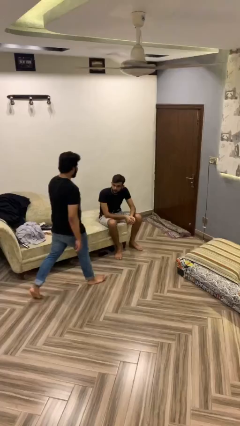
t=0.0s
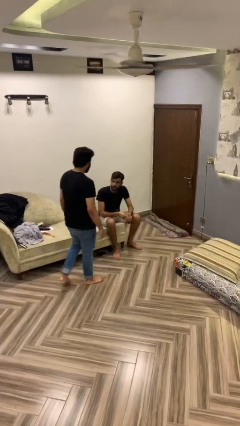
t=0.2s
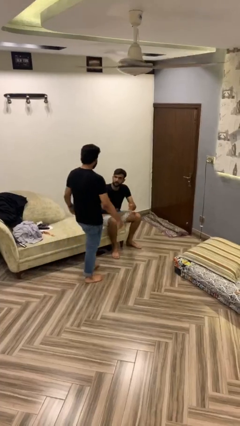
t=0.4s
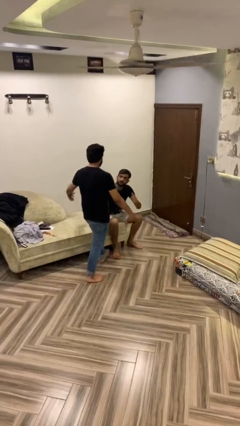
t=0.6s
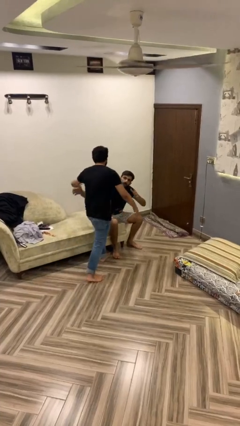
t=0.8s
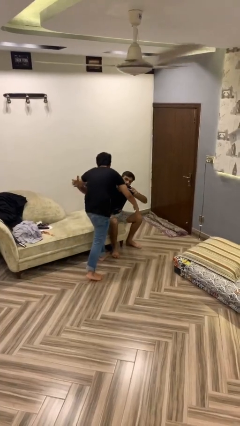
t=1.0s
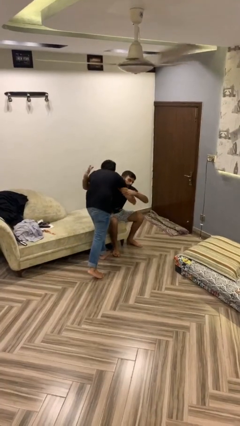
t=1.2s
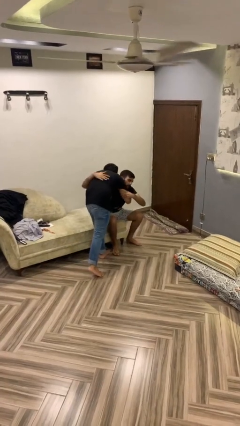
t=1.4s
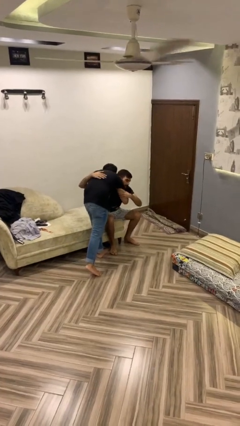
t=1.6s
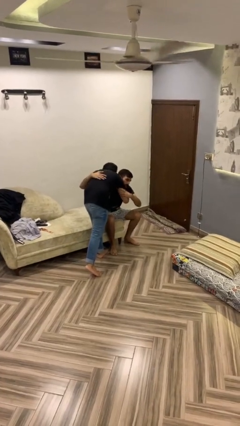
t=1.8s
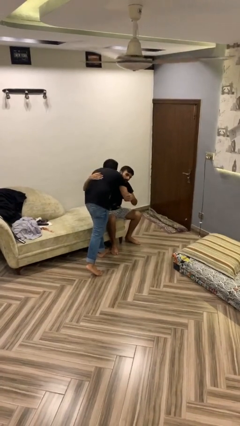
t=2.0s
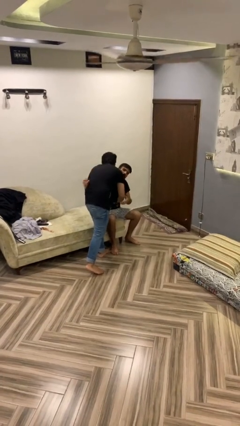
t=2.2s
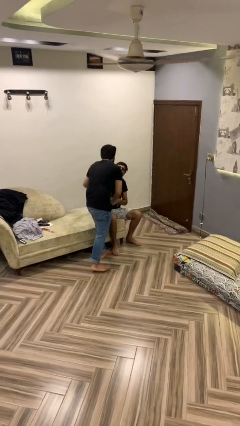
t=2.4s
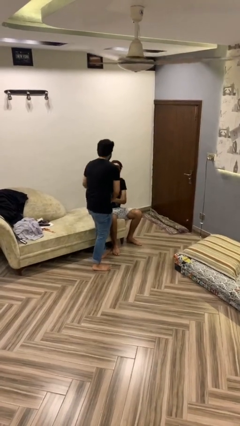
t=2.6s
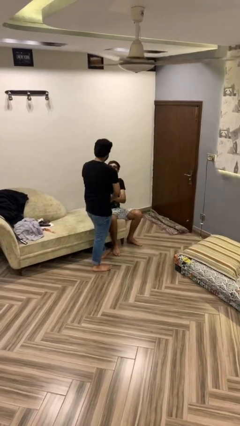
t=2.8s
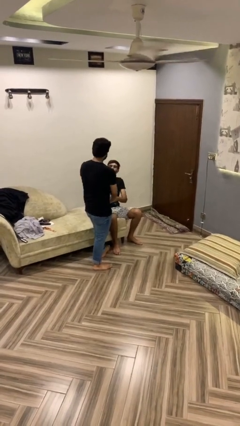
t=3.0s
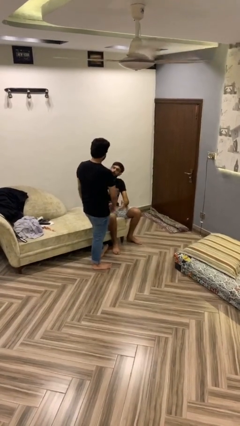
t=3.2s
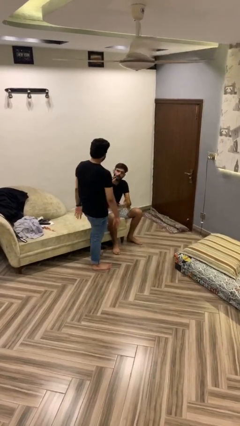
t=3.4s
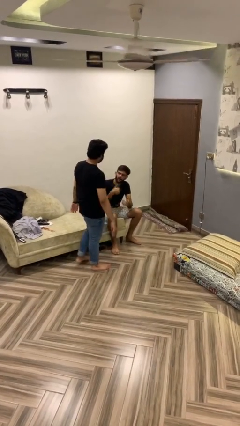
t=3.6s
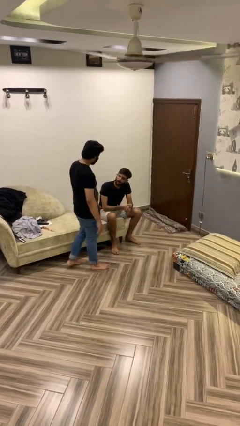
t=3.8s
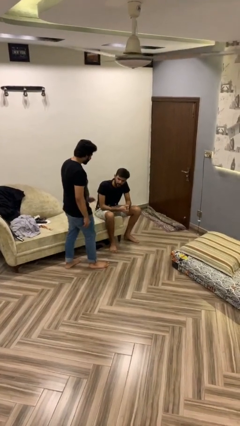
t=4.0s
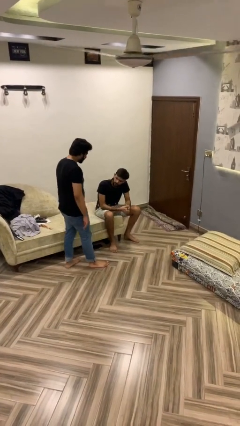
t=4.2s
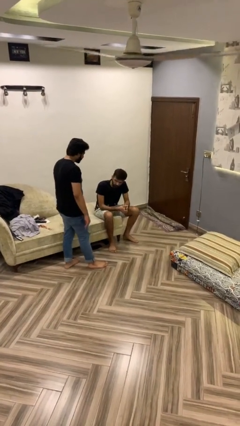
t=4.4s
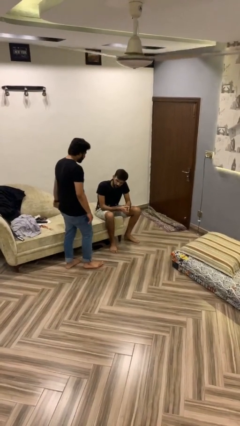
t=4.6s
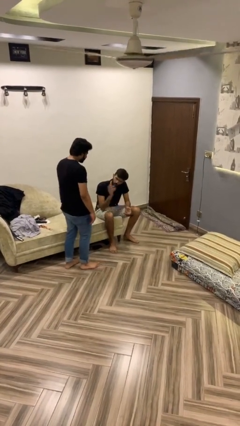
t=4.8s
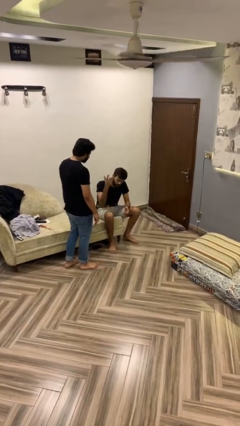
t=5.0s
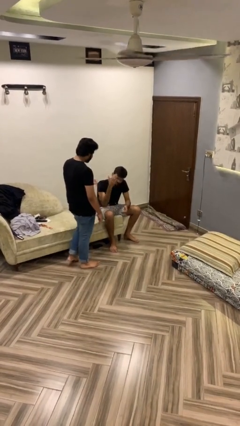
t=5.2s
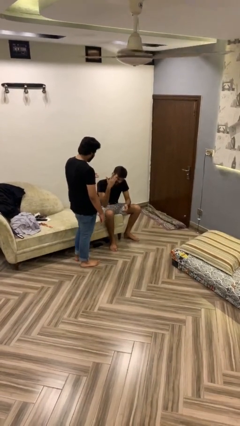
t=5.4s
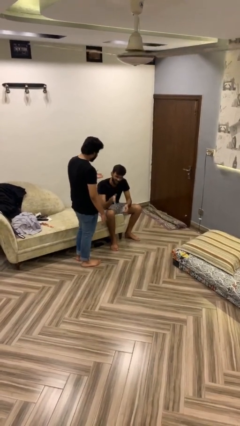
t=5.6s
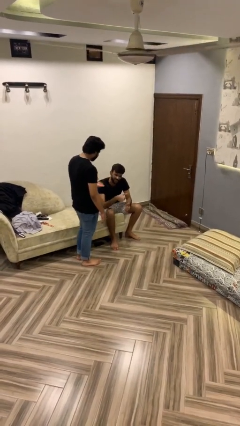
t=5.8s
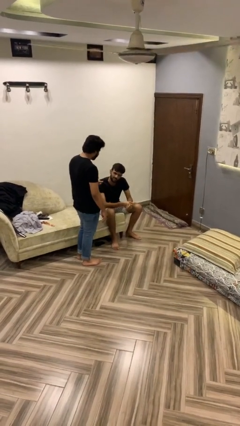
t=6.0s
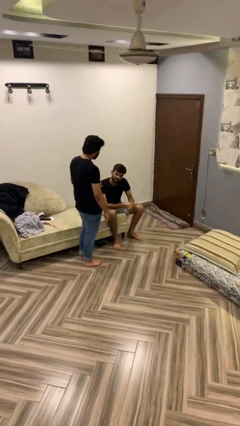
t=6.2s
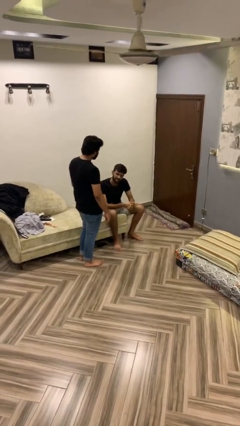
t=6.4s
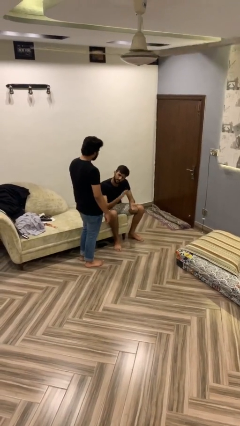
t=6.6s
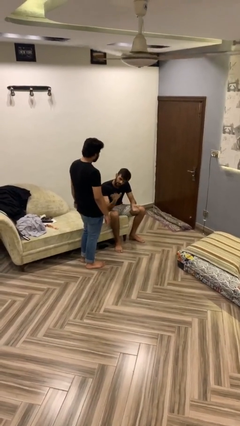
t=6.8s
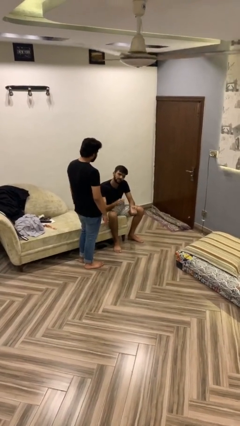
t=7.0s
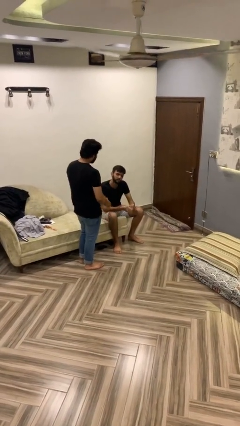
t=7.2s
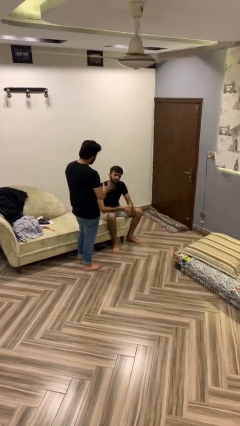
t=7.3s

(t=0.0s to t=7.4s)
person embraces person

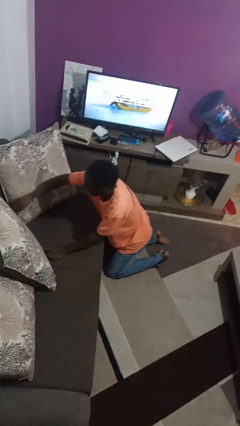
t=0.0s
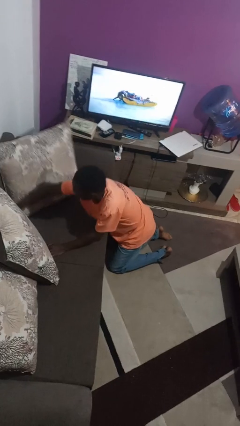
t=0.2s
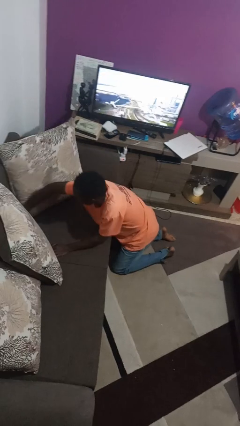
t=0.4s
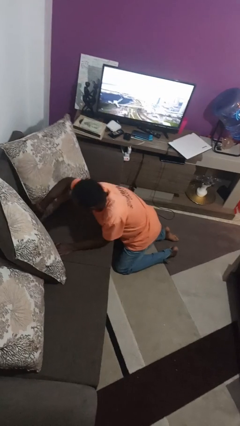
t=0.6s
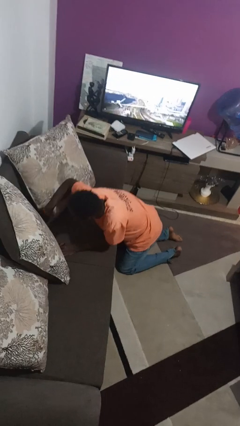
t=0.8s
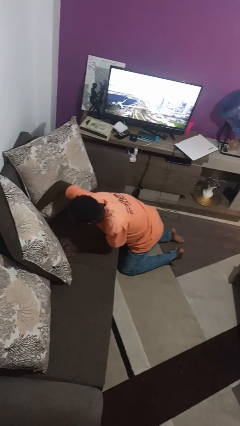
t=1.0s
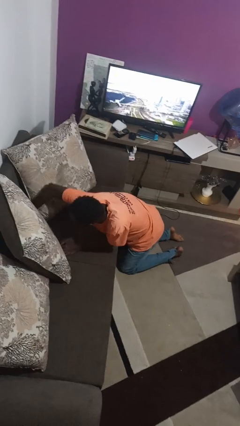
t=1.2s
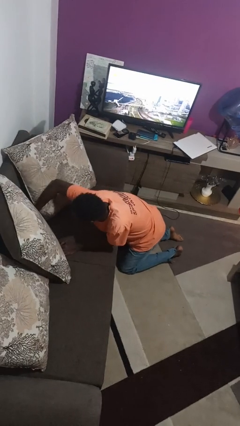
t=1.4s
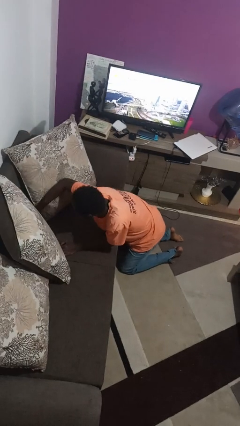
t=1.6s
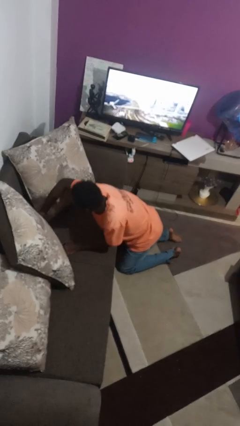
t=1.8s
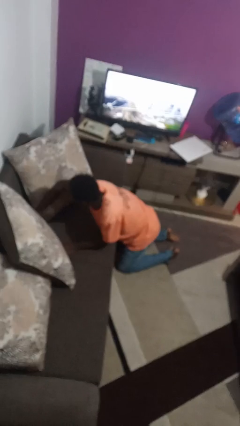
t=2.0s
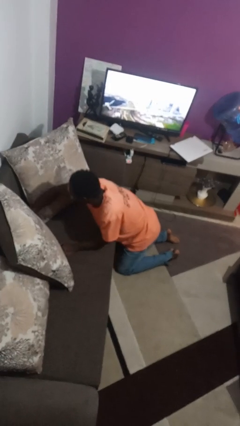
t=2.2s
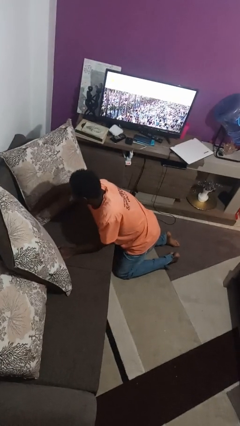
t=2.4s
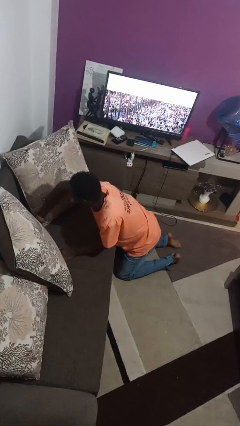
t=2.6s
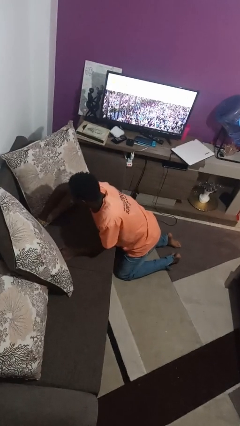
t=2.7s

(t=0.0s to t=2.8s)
person searches in couch

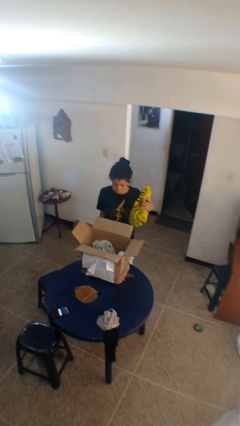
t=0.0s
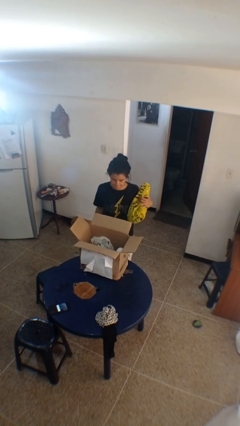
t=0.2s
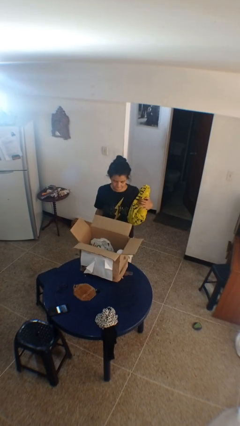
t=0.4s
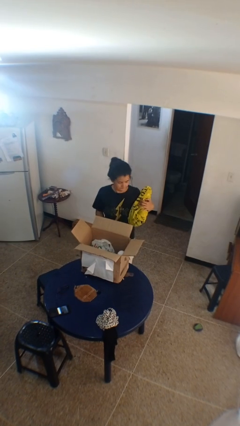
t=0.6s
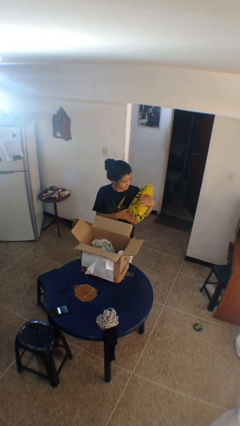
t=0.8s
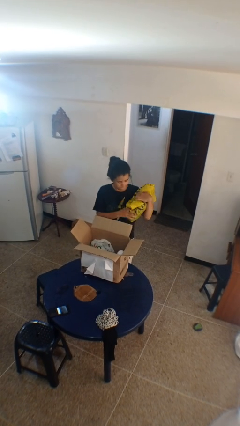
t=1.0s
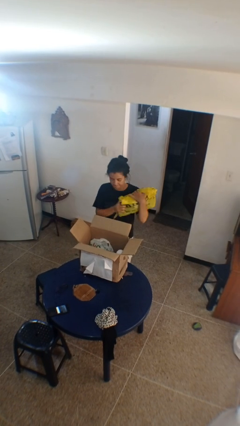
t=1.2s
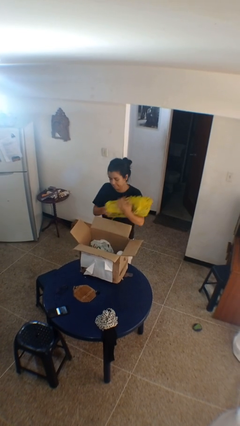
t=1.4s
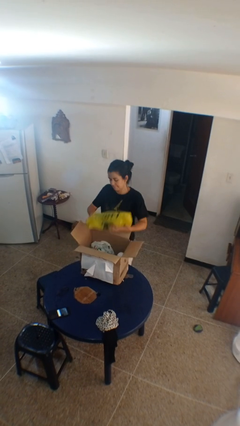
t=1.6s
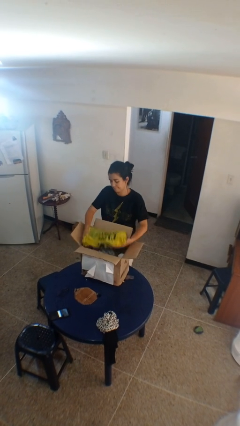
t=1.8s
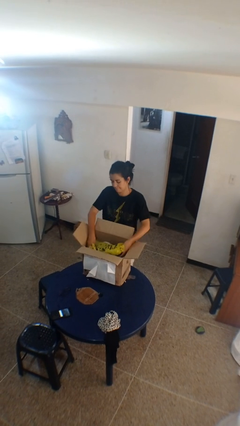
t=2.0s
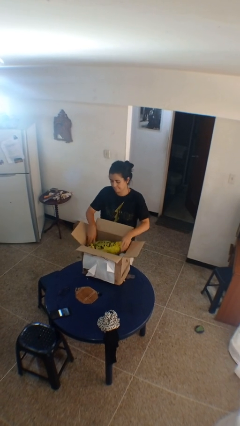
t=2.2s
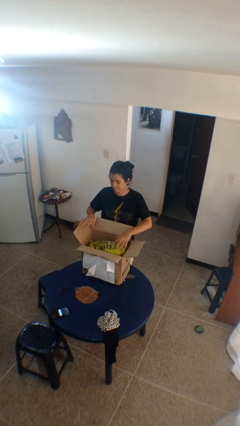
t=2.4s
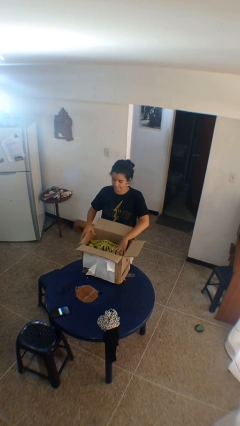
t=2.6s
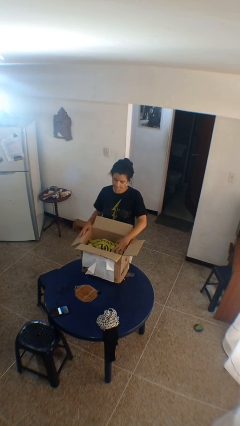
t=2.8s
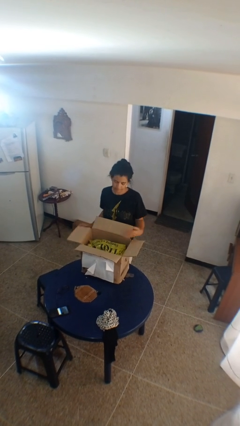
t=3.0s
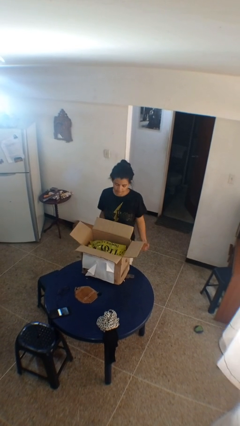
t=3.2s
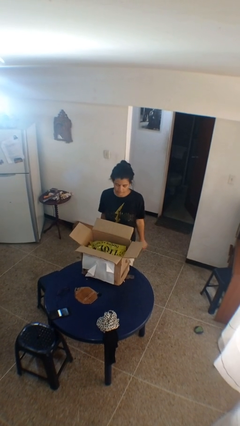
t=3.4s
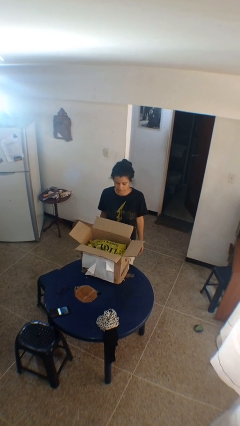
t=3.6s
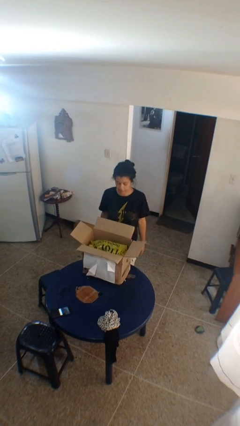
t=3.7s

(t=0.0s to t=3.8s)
person puts object into box

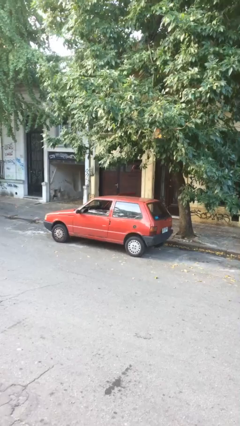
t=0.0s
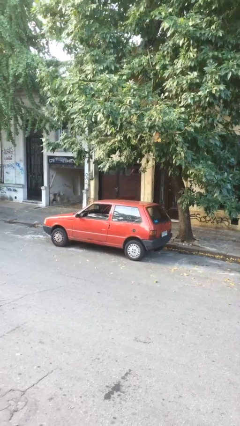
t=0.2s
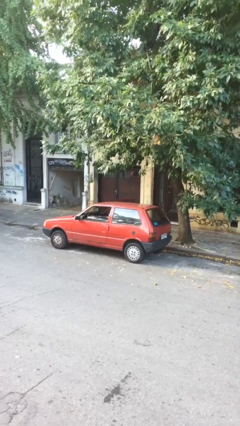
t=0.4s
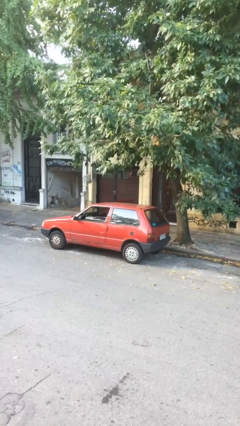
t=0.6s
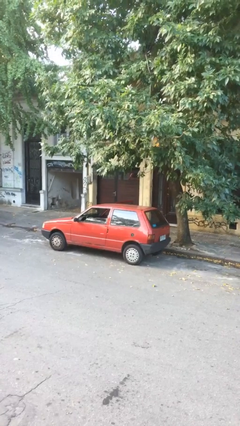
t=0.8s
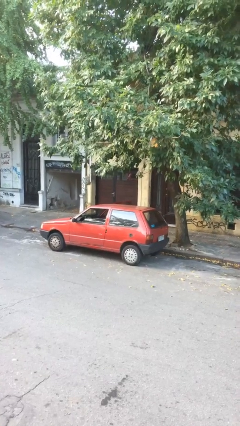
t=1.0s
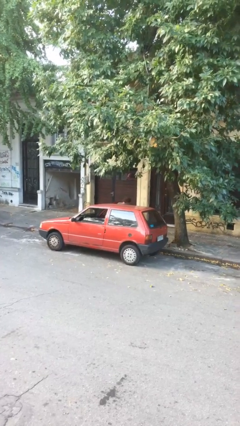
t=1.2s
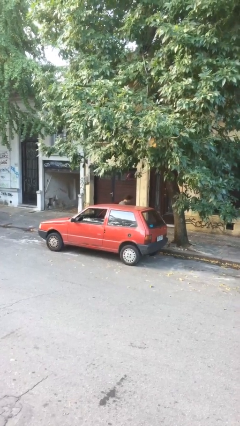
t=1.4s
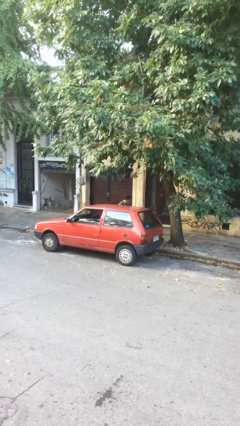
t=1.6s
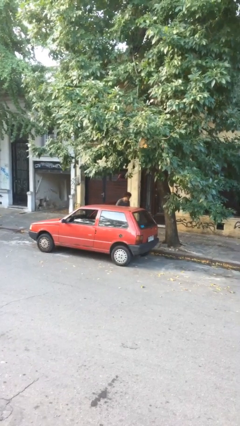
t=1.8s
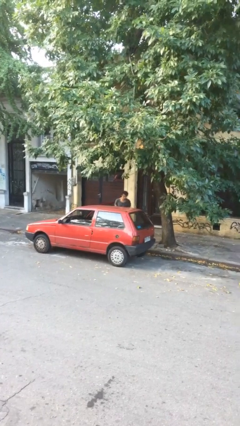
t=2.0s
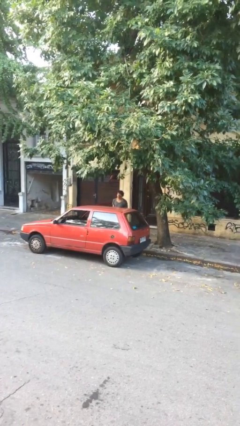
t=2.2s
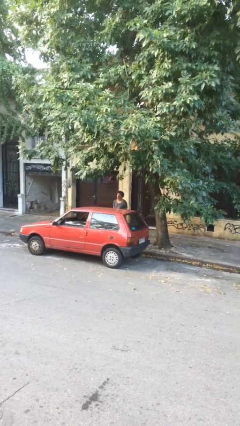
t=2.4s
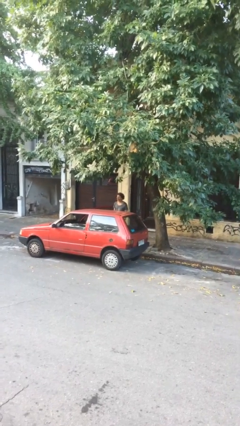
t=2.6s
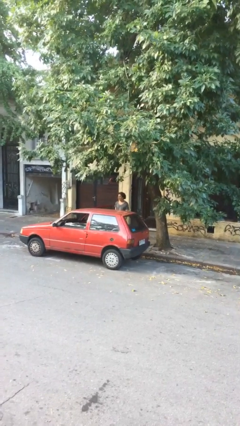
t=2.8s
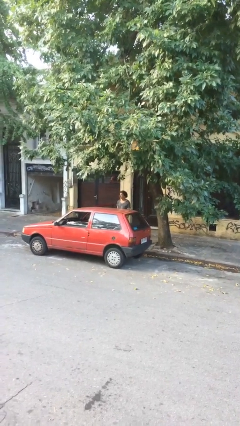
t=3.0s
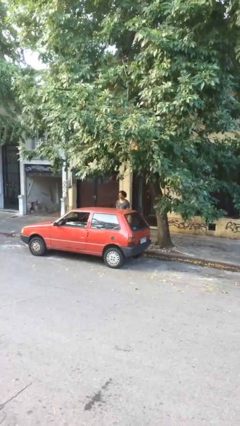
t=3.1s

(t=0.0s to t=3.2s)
person exits car

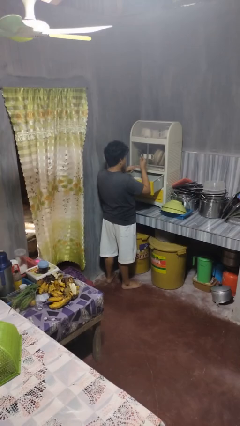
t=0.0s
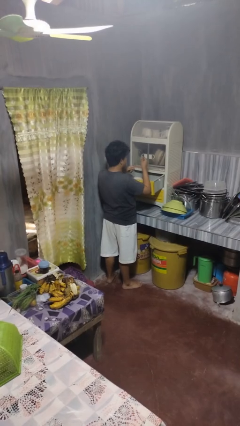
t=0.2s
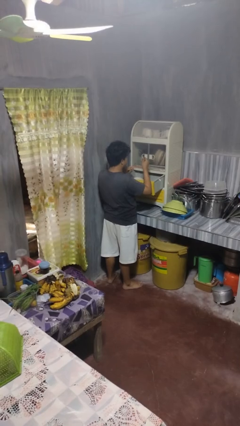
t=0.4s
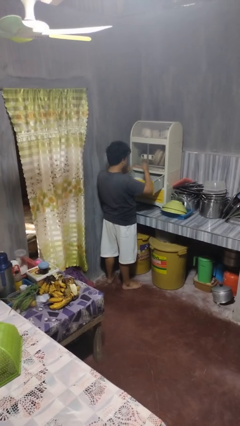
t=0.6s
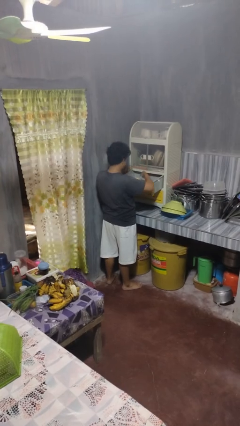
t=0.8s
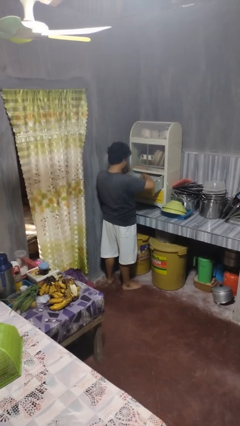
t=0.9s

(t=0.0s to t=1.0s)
person puts object into kitchen drawer
